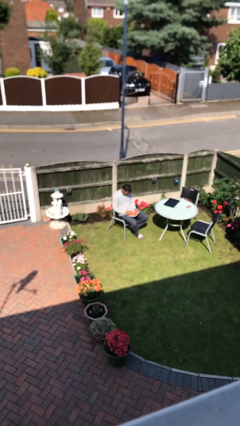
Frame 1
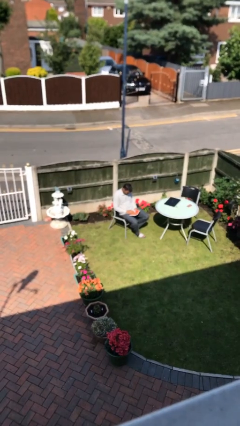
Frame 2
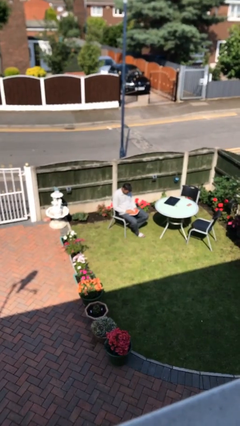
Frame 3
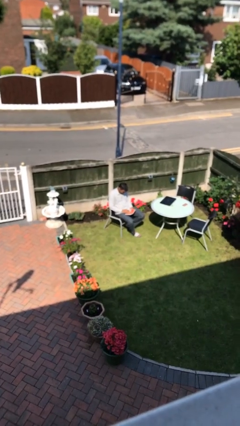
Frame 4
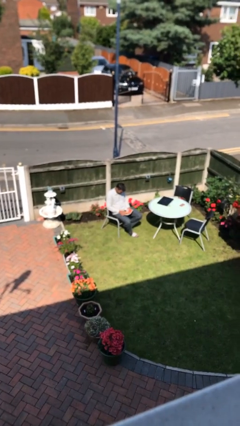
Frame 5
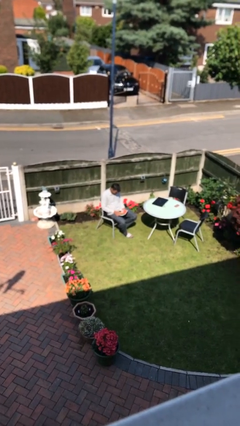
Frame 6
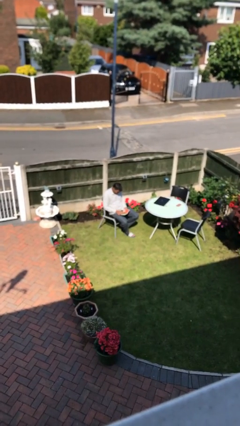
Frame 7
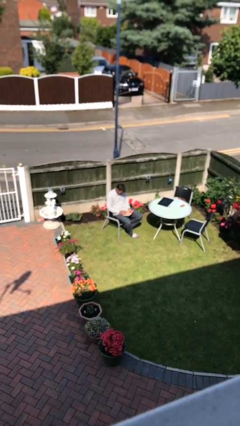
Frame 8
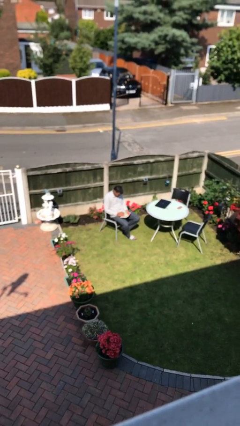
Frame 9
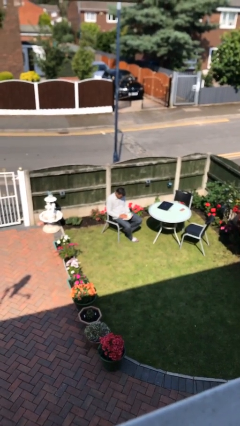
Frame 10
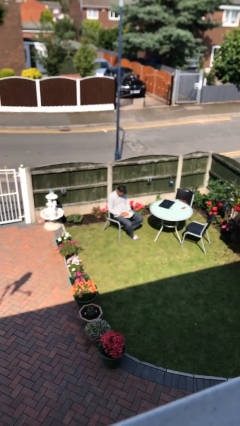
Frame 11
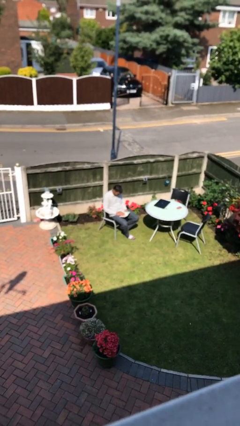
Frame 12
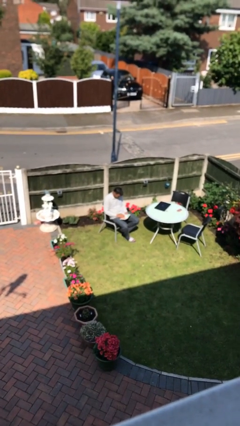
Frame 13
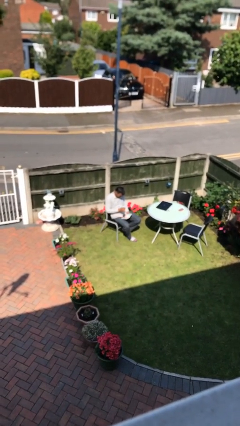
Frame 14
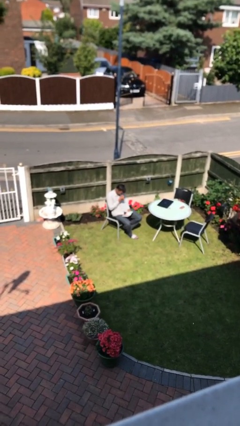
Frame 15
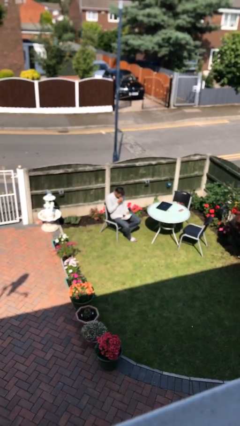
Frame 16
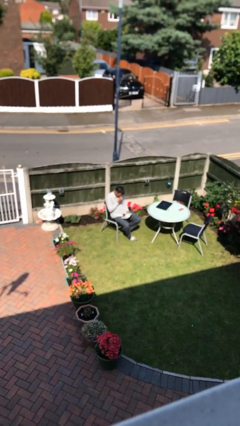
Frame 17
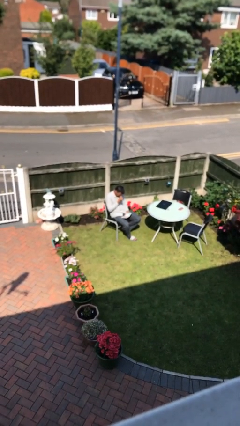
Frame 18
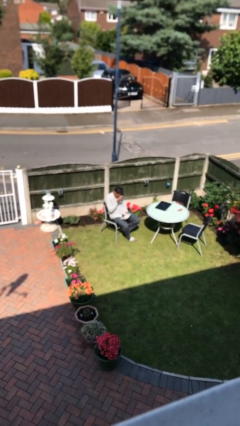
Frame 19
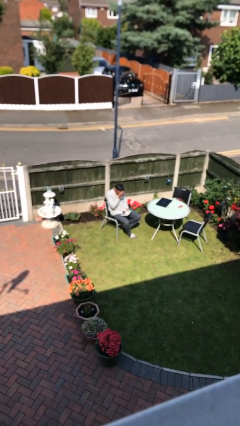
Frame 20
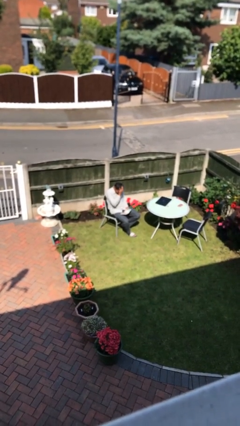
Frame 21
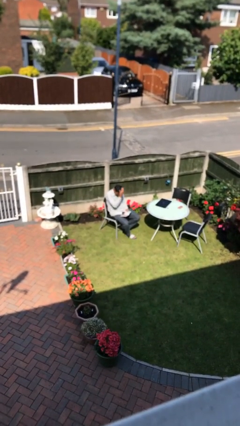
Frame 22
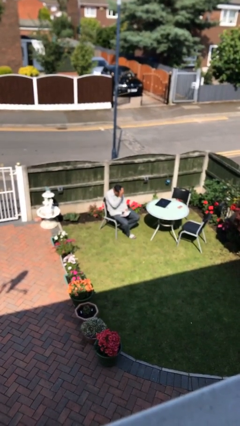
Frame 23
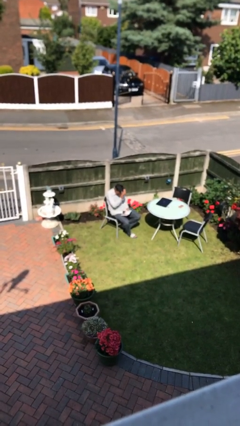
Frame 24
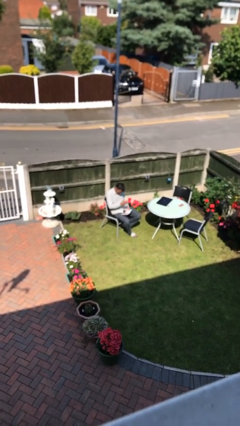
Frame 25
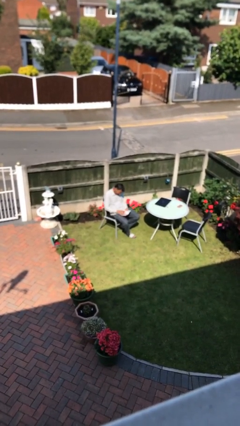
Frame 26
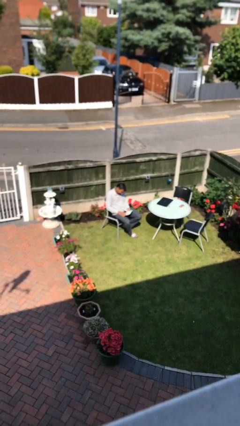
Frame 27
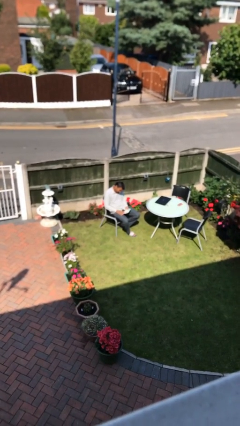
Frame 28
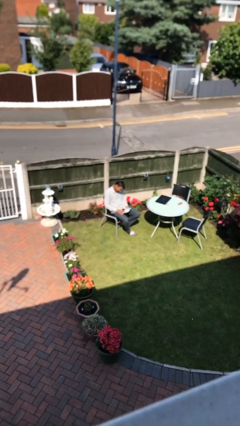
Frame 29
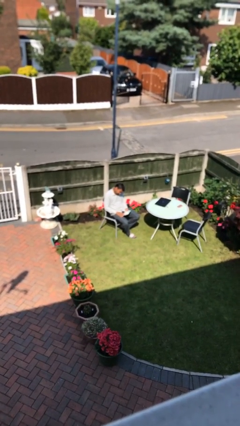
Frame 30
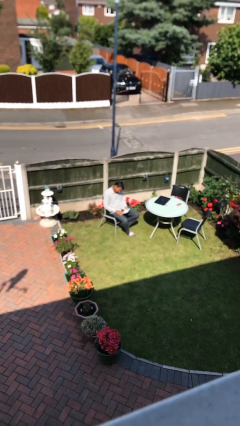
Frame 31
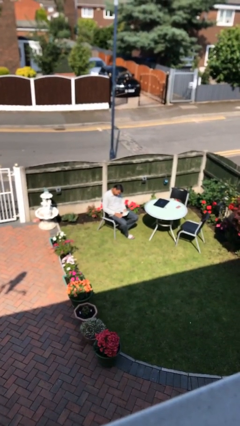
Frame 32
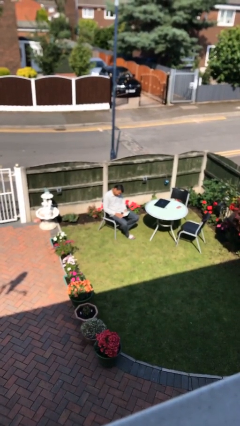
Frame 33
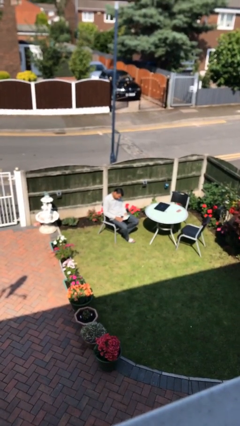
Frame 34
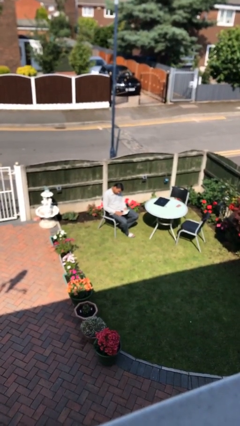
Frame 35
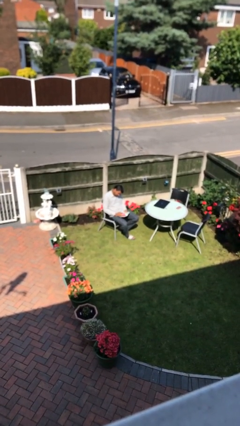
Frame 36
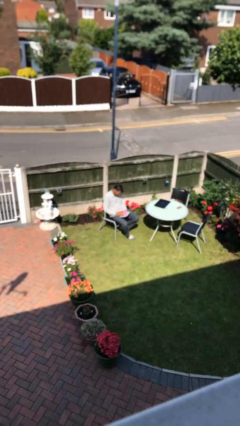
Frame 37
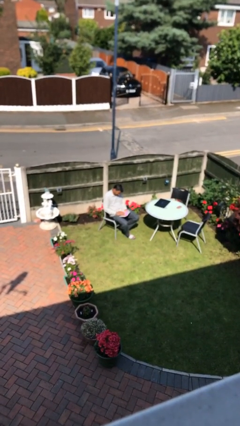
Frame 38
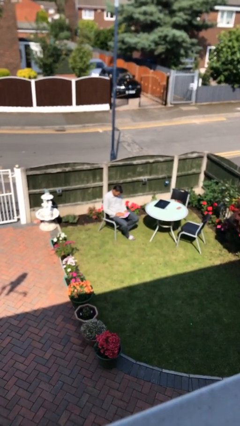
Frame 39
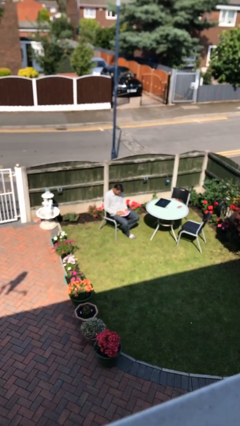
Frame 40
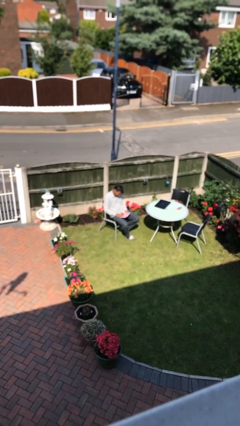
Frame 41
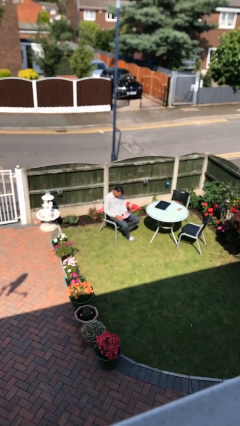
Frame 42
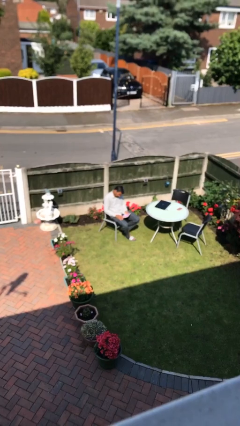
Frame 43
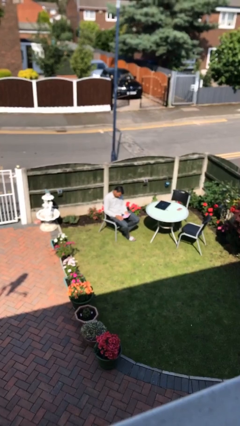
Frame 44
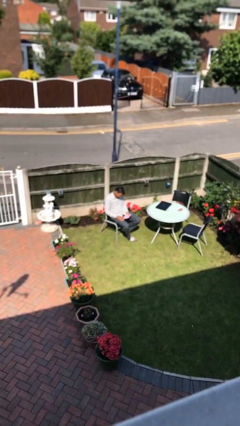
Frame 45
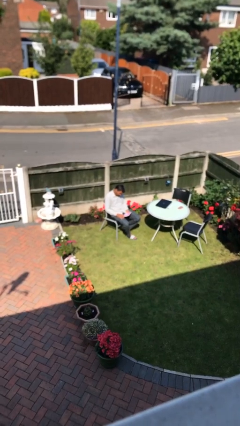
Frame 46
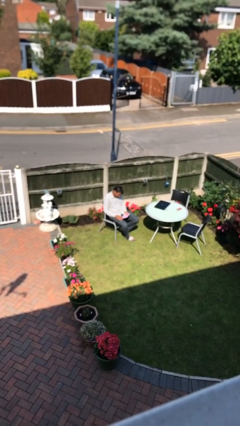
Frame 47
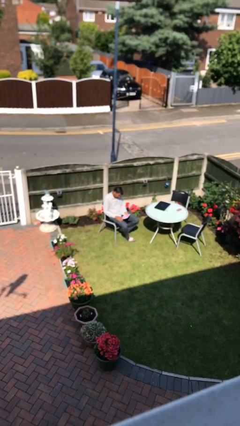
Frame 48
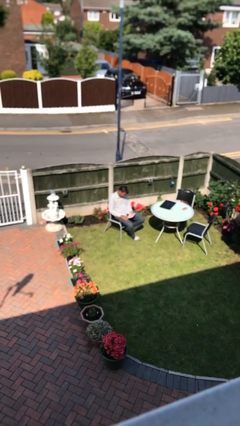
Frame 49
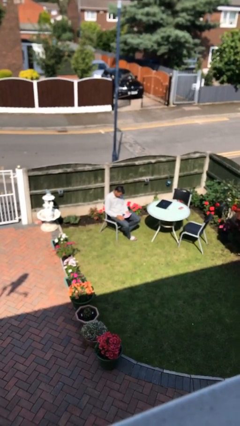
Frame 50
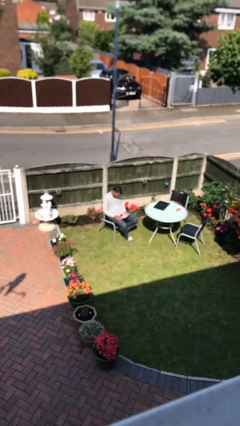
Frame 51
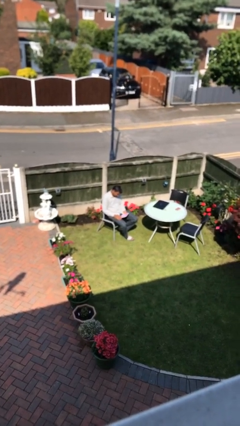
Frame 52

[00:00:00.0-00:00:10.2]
person reads document

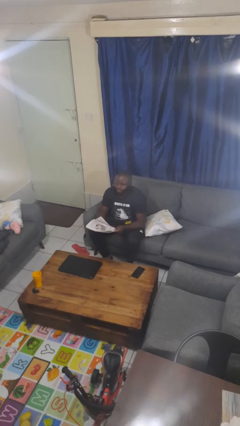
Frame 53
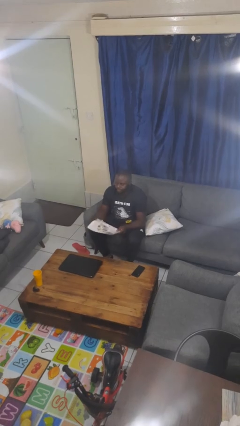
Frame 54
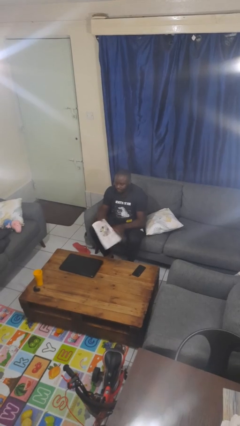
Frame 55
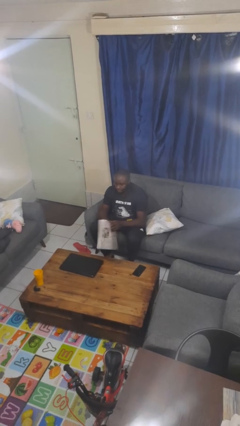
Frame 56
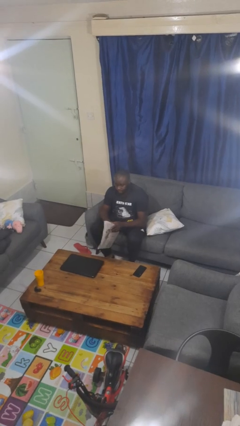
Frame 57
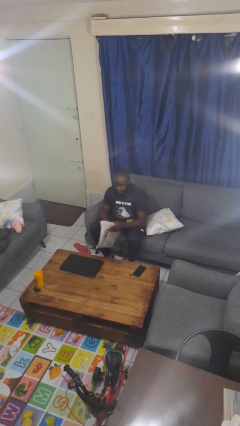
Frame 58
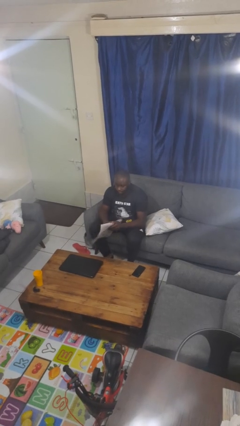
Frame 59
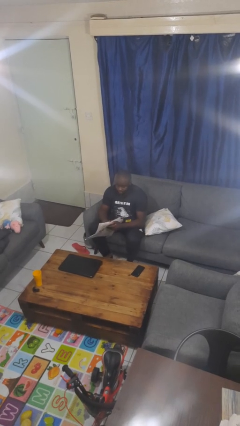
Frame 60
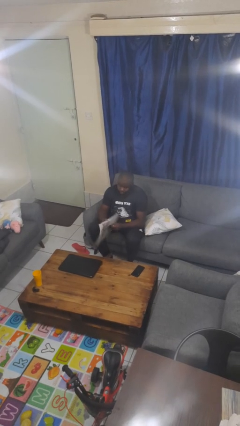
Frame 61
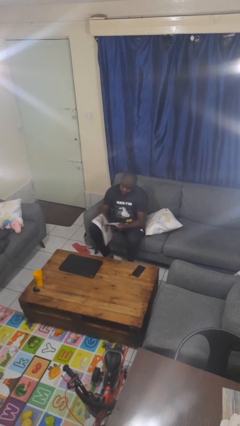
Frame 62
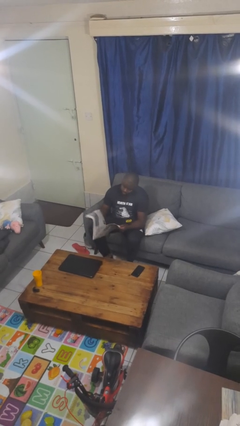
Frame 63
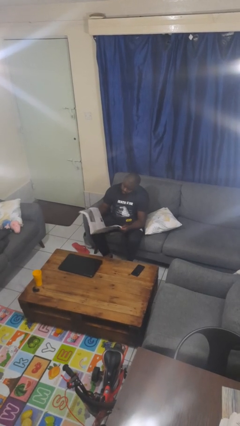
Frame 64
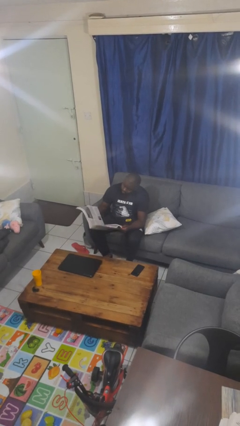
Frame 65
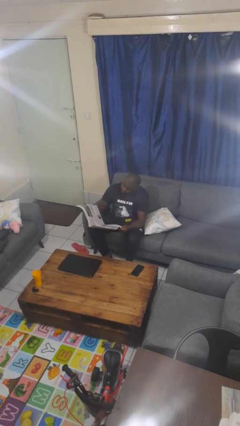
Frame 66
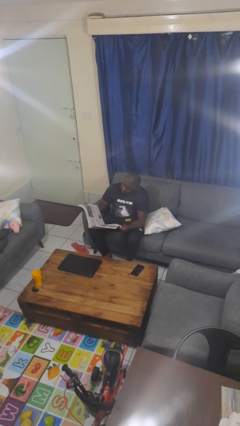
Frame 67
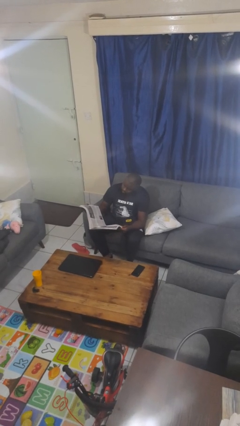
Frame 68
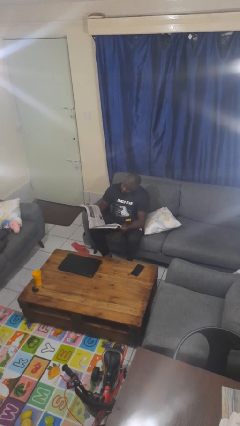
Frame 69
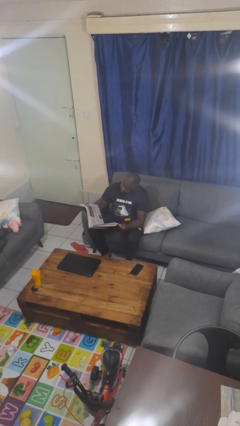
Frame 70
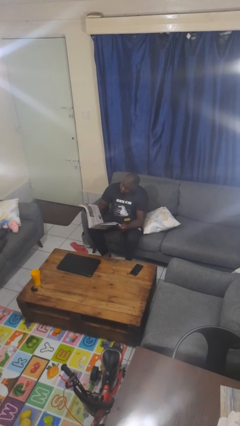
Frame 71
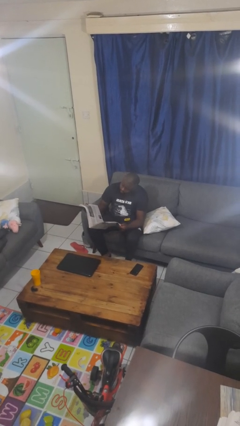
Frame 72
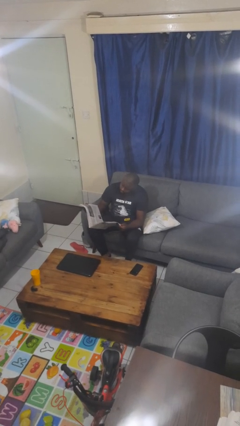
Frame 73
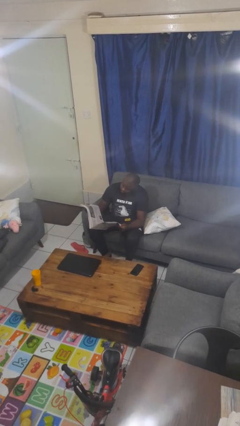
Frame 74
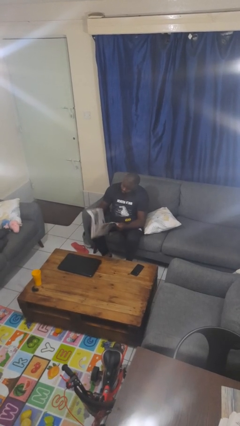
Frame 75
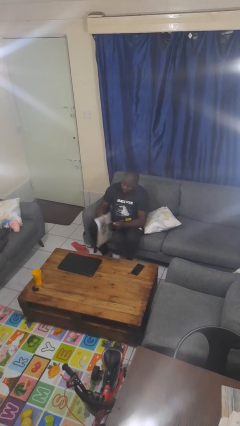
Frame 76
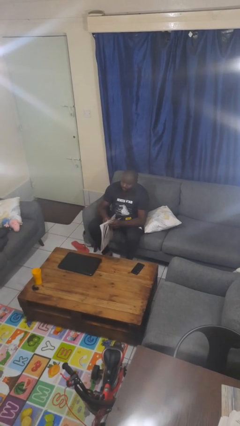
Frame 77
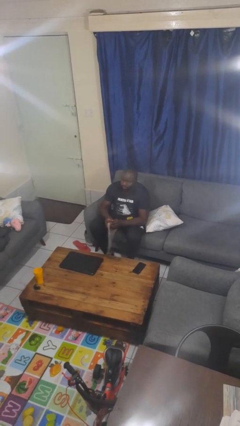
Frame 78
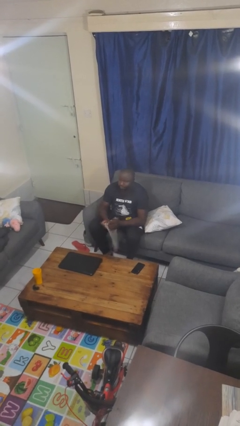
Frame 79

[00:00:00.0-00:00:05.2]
person reads newspaper

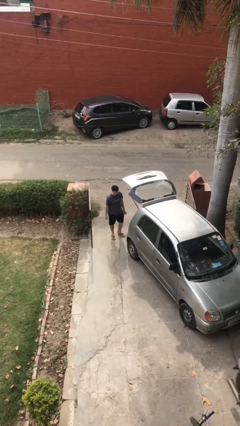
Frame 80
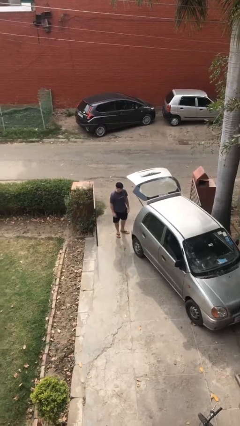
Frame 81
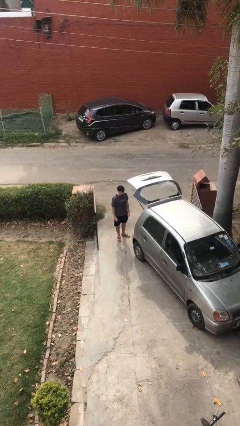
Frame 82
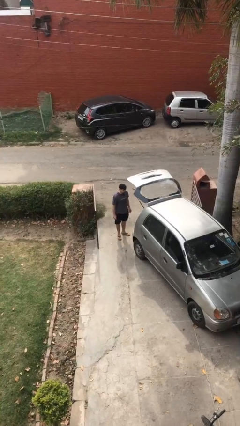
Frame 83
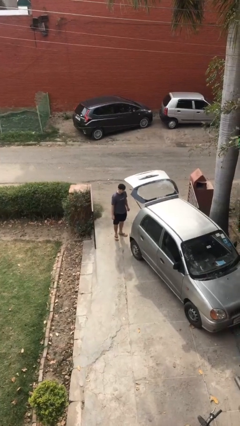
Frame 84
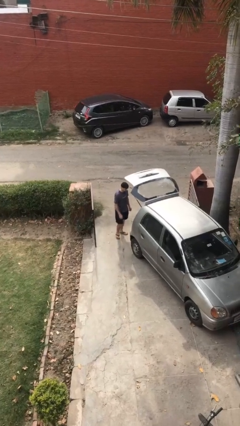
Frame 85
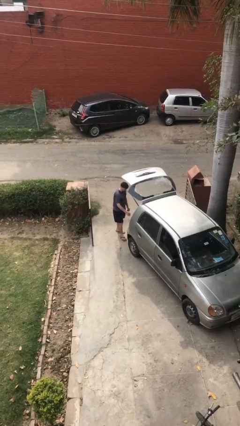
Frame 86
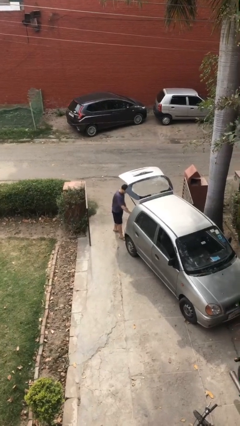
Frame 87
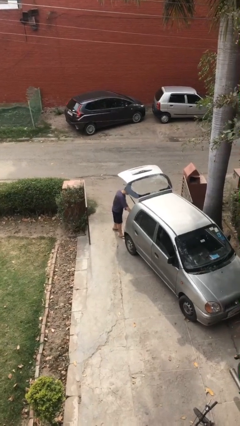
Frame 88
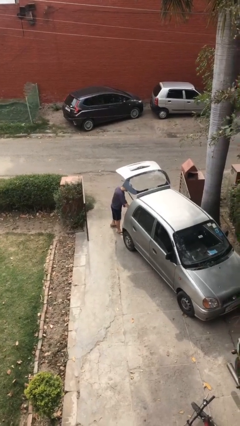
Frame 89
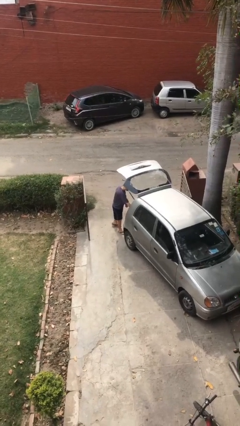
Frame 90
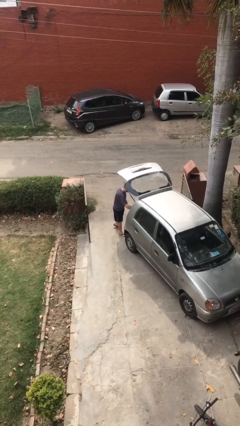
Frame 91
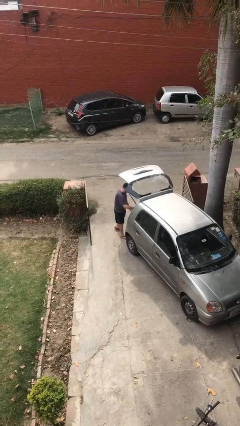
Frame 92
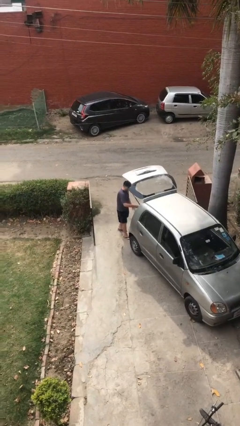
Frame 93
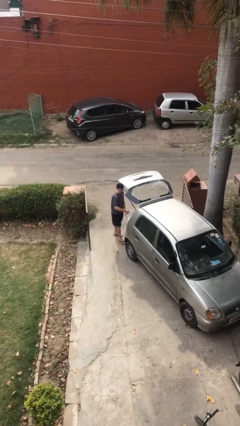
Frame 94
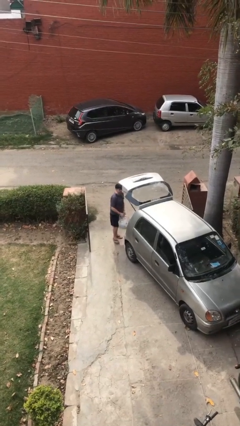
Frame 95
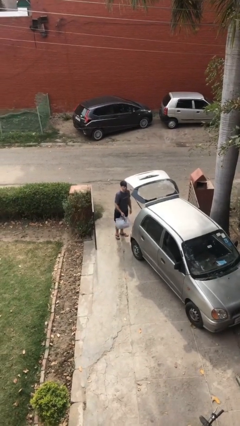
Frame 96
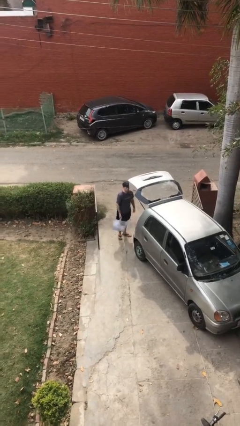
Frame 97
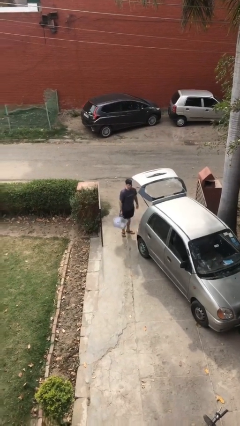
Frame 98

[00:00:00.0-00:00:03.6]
person unloads car
